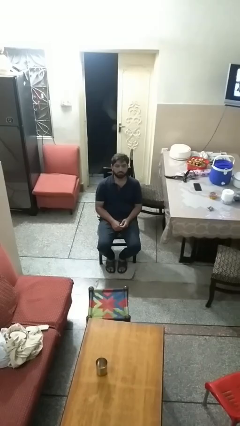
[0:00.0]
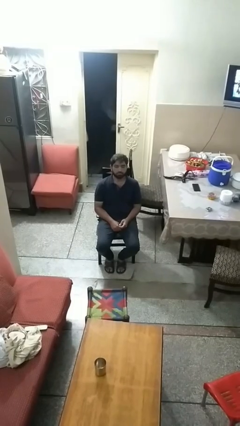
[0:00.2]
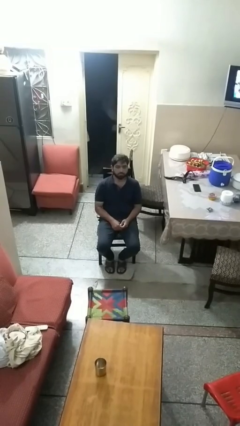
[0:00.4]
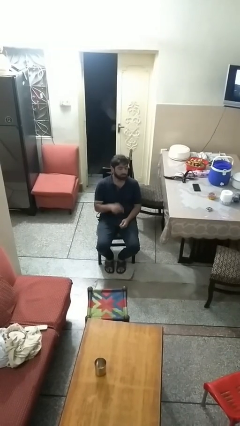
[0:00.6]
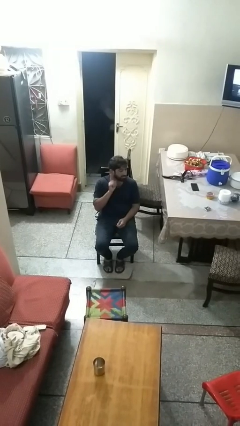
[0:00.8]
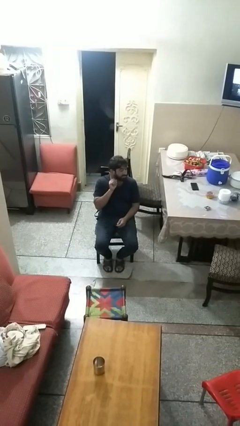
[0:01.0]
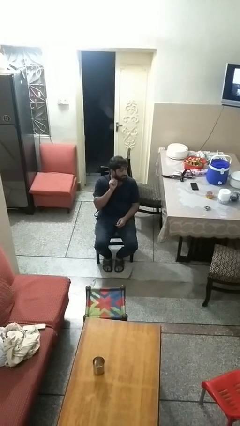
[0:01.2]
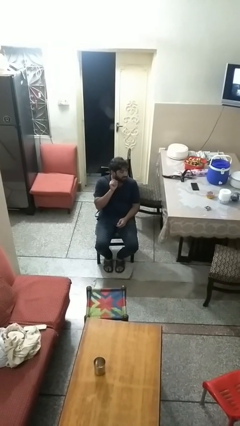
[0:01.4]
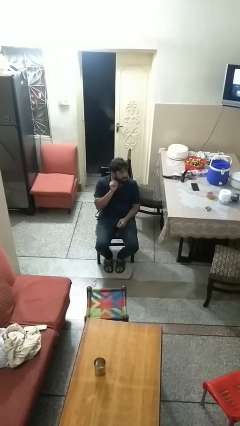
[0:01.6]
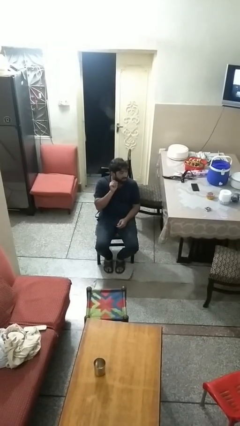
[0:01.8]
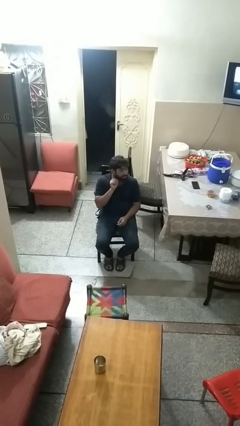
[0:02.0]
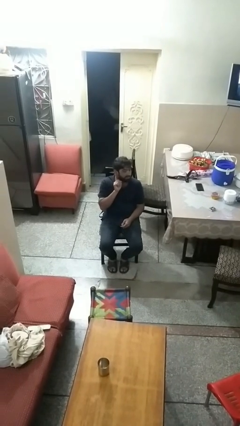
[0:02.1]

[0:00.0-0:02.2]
person gestures listen closely

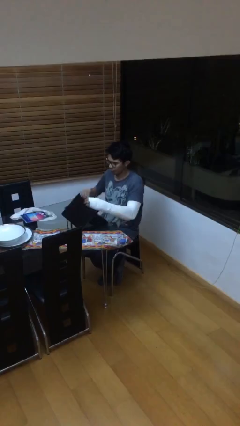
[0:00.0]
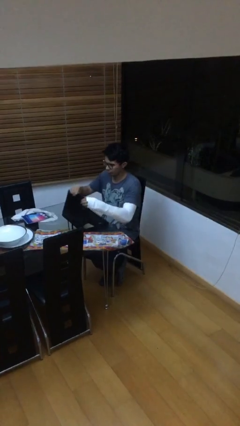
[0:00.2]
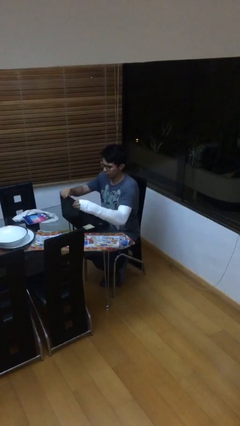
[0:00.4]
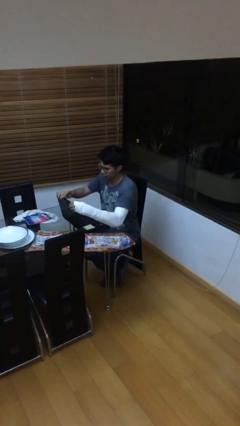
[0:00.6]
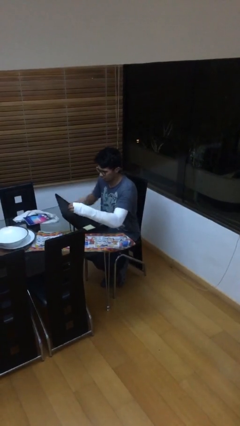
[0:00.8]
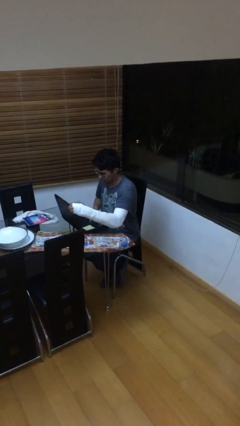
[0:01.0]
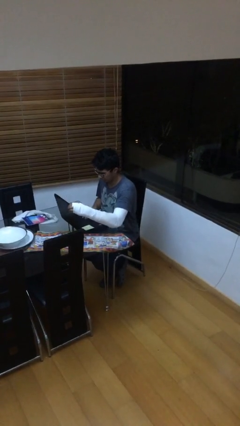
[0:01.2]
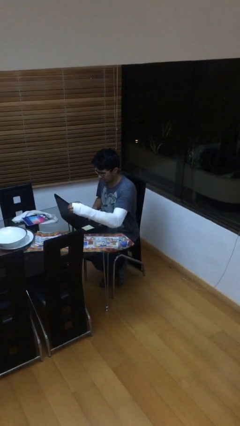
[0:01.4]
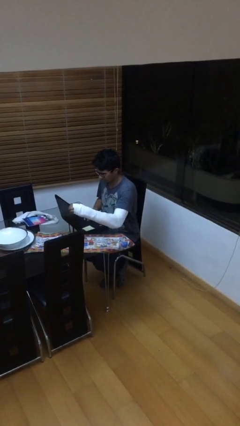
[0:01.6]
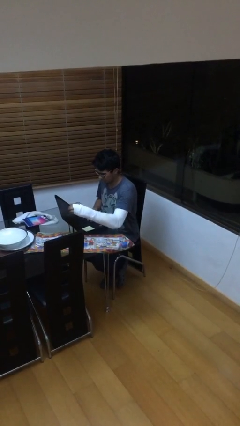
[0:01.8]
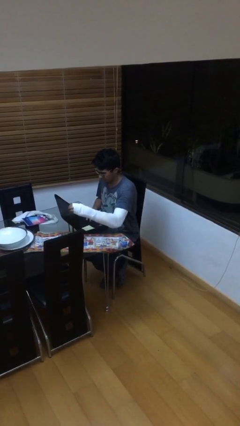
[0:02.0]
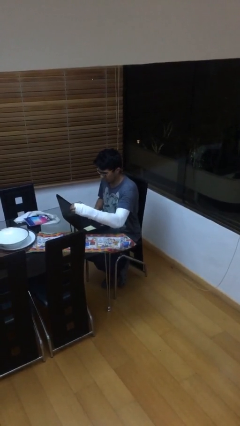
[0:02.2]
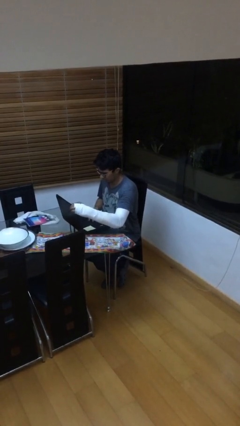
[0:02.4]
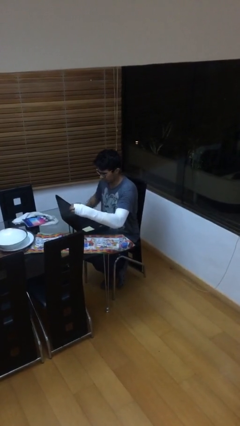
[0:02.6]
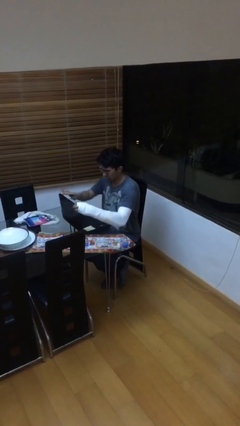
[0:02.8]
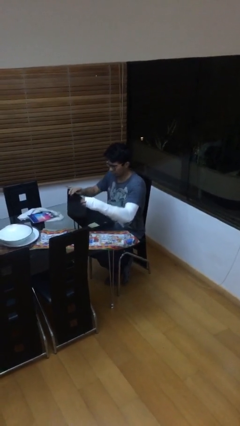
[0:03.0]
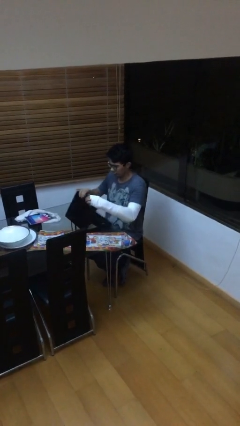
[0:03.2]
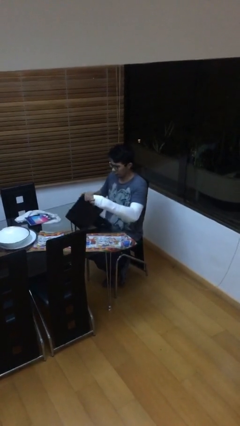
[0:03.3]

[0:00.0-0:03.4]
person interacts with laptop

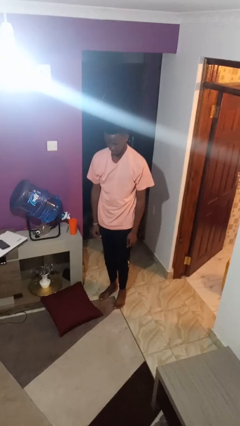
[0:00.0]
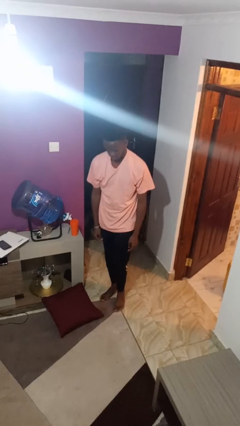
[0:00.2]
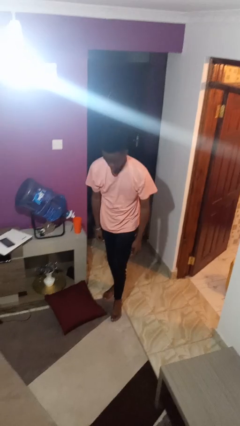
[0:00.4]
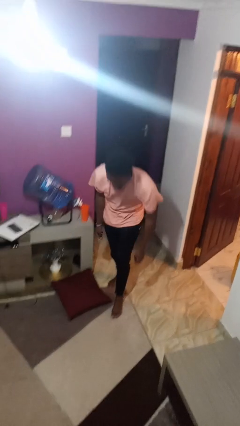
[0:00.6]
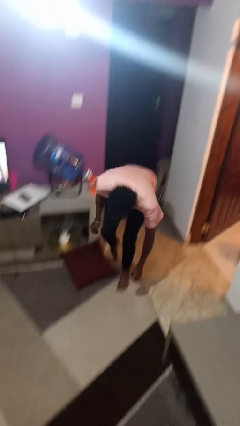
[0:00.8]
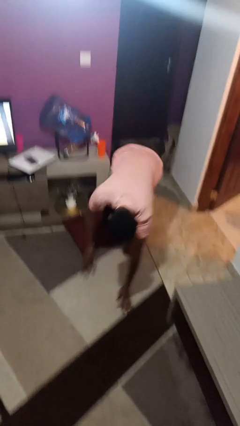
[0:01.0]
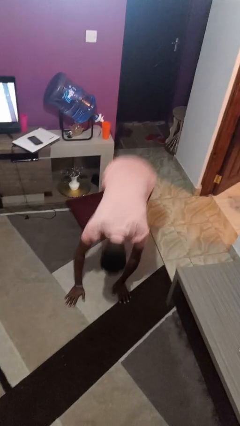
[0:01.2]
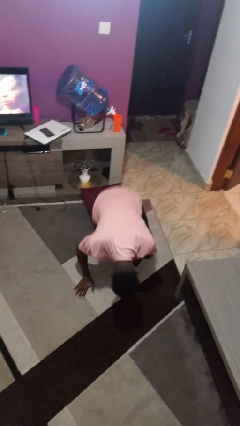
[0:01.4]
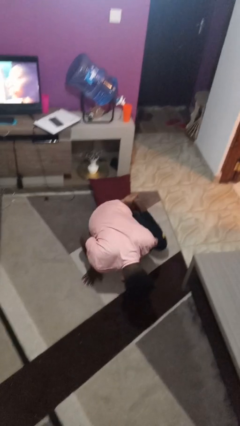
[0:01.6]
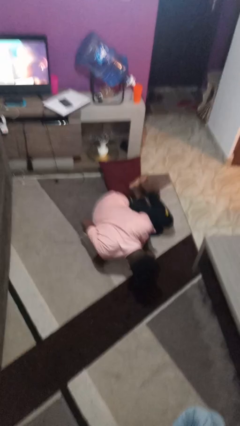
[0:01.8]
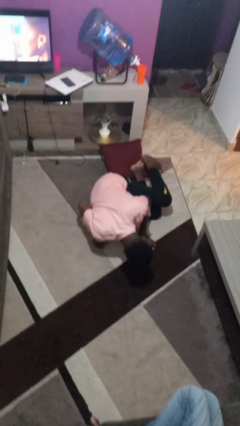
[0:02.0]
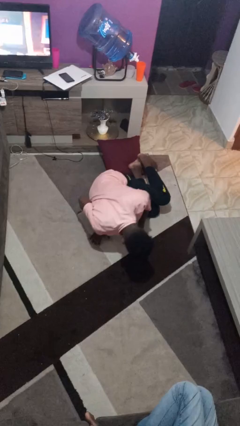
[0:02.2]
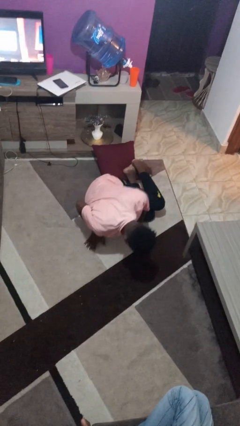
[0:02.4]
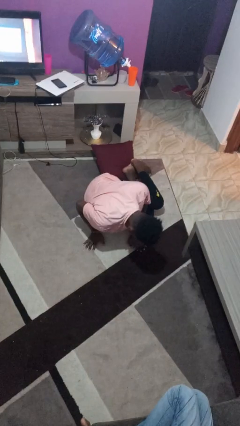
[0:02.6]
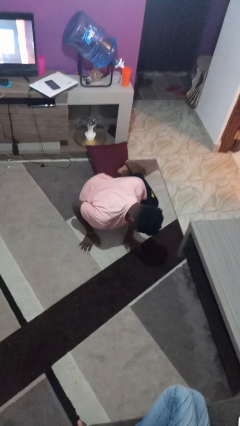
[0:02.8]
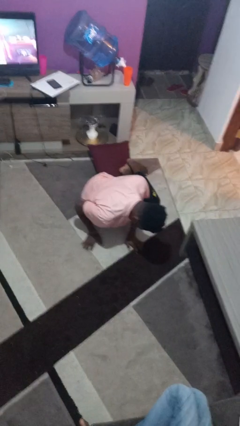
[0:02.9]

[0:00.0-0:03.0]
person trips on object on floor

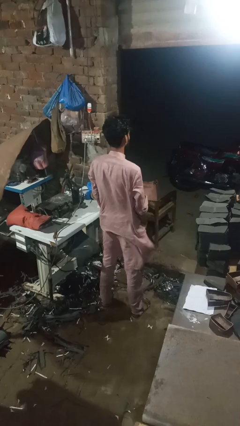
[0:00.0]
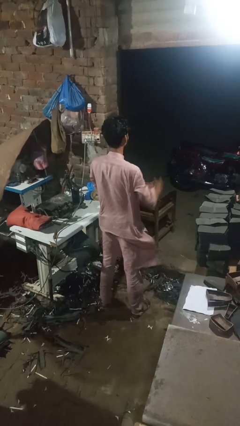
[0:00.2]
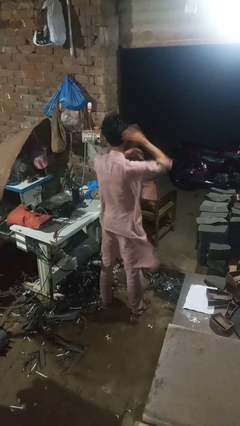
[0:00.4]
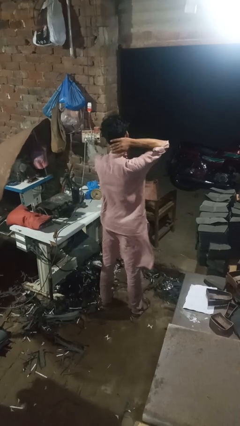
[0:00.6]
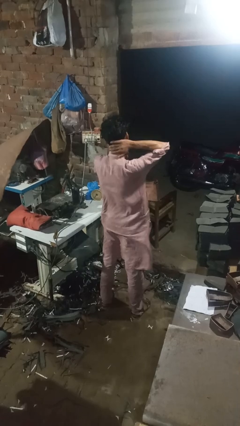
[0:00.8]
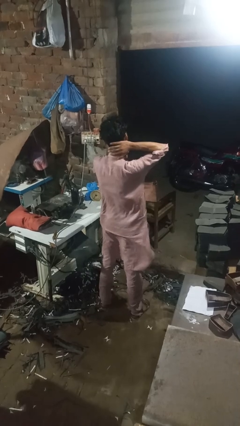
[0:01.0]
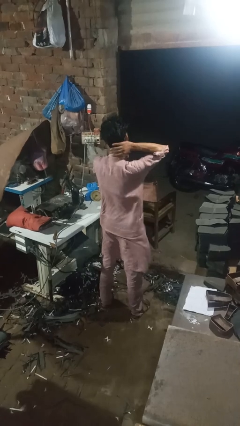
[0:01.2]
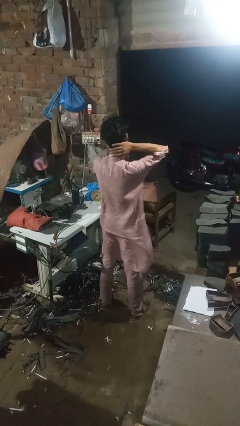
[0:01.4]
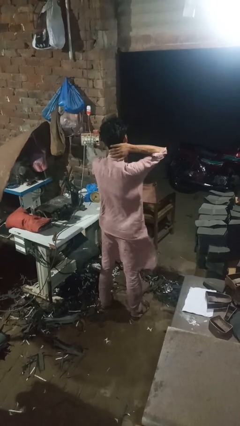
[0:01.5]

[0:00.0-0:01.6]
person rubs neck

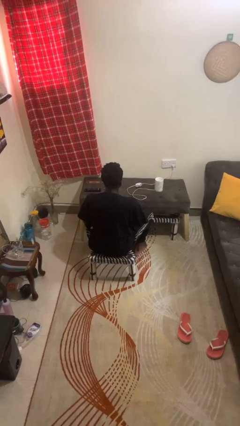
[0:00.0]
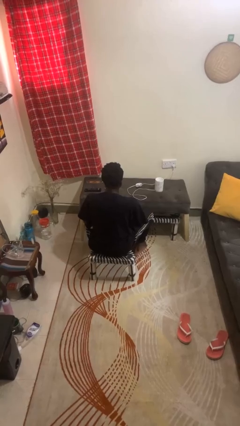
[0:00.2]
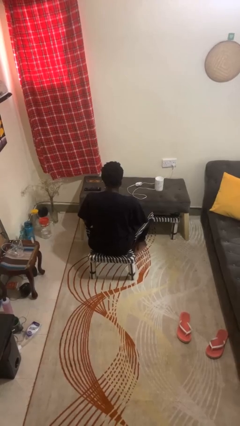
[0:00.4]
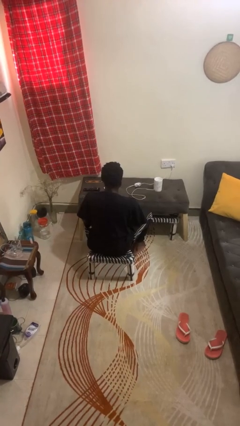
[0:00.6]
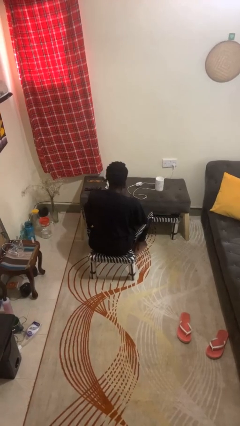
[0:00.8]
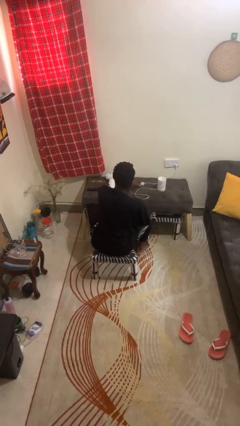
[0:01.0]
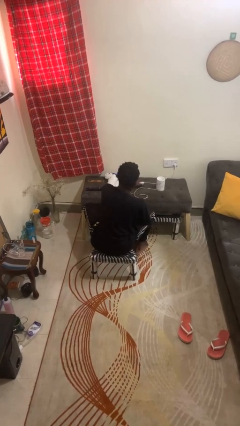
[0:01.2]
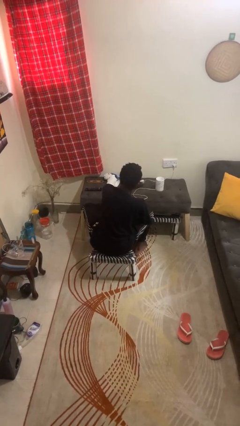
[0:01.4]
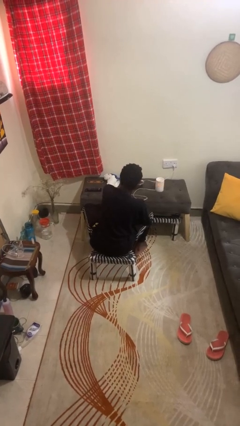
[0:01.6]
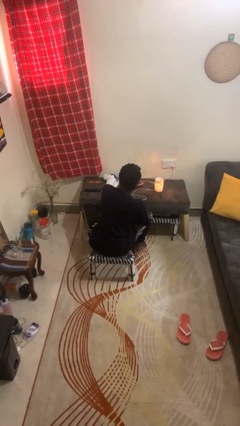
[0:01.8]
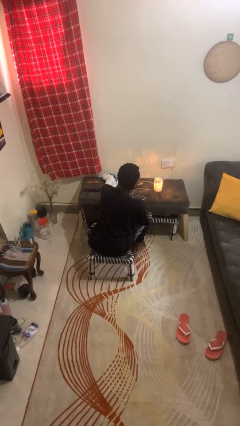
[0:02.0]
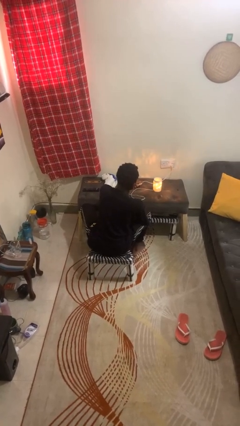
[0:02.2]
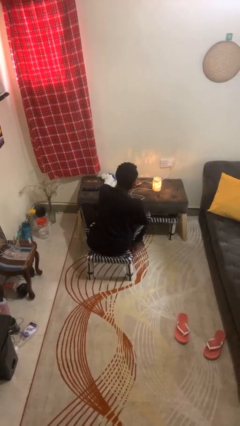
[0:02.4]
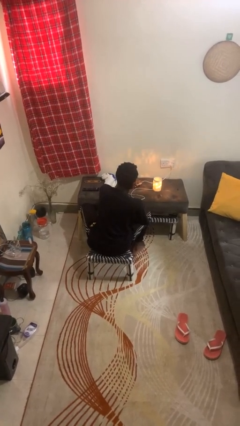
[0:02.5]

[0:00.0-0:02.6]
person turns on lamp

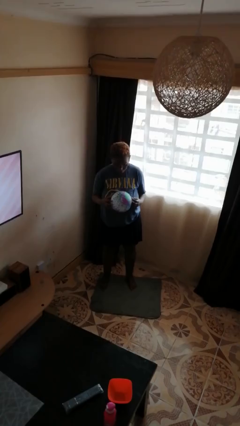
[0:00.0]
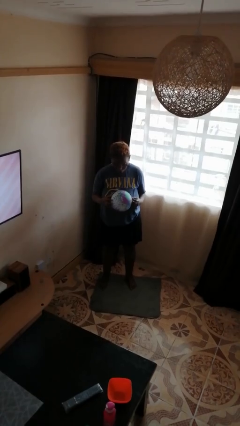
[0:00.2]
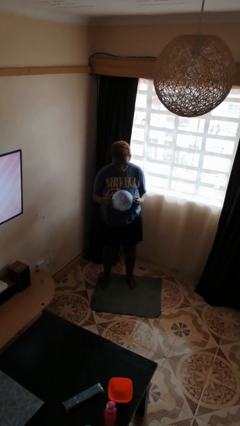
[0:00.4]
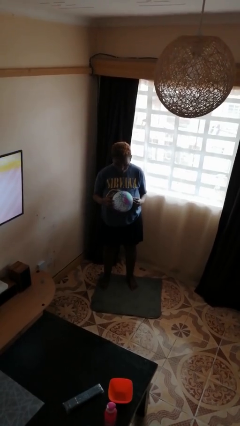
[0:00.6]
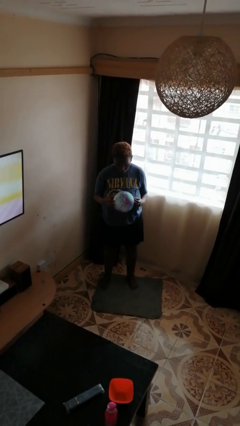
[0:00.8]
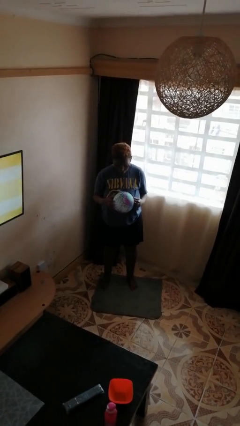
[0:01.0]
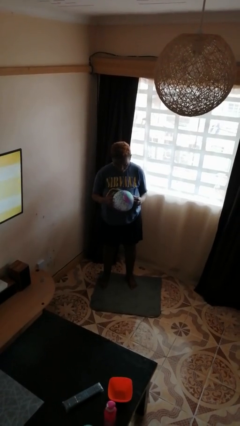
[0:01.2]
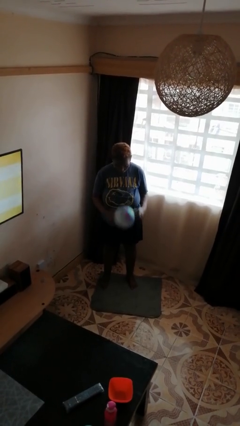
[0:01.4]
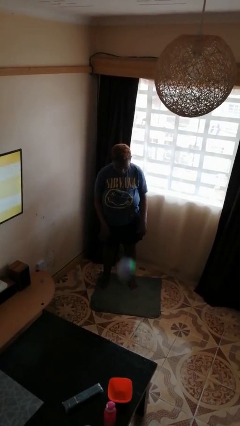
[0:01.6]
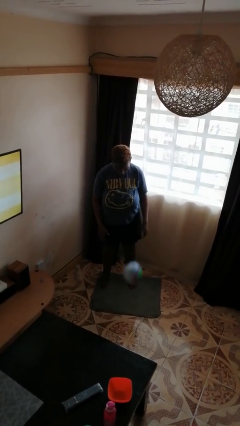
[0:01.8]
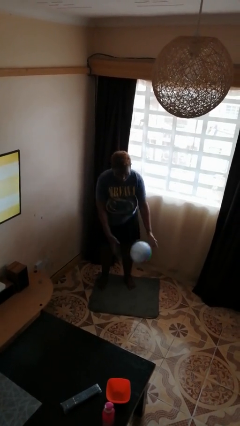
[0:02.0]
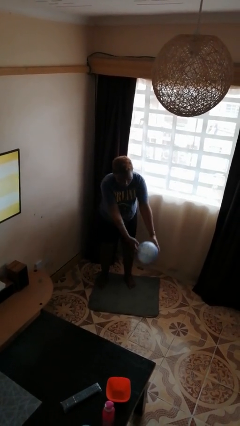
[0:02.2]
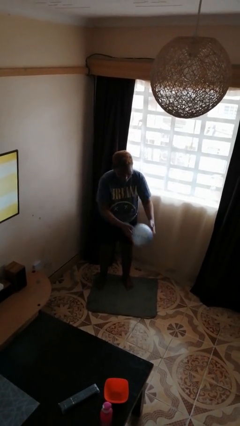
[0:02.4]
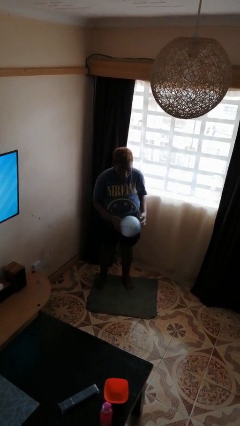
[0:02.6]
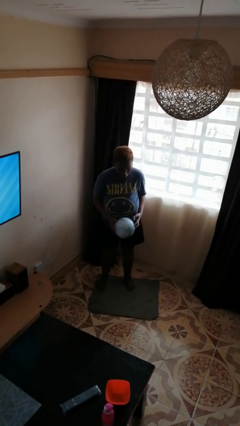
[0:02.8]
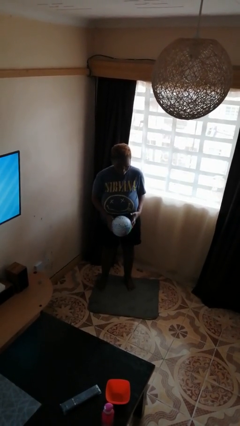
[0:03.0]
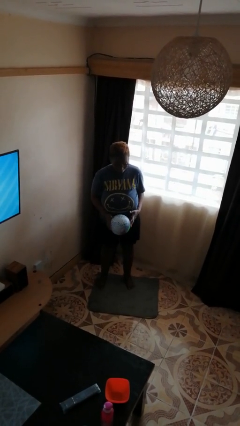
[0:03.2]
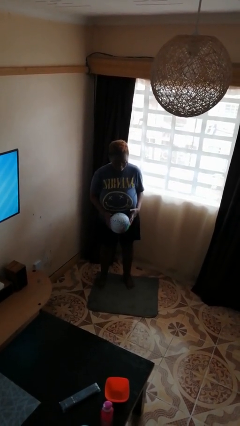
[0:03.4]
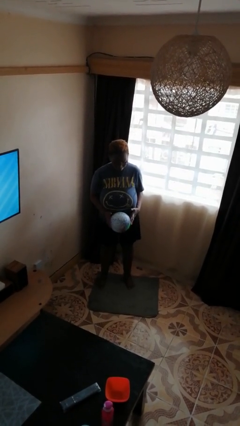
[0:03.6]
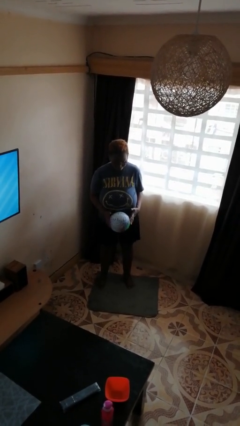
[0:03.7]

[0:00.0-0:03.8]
person bounces ball on floor

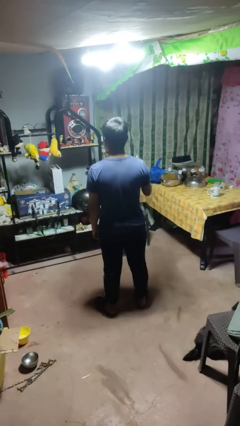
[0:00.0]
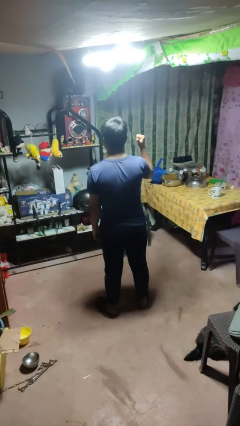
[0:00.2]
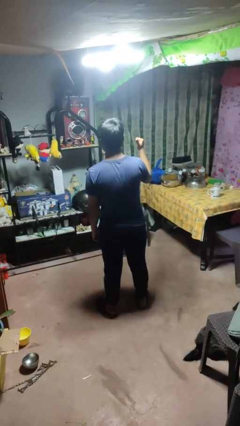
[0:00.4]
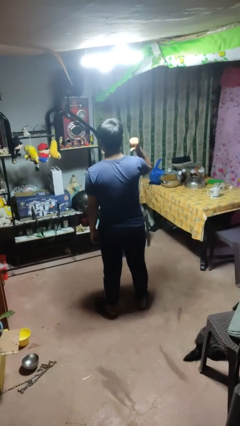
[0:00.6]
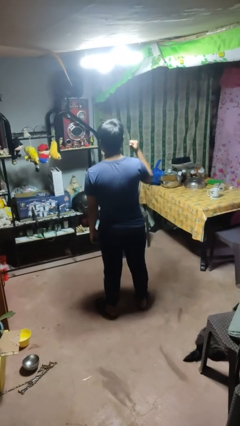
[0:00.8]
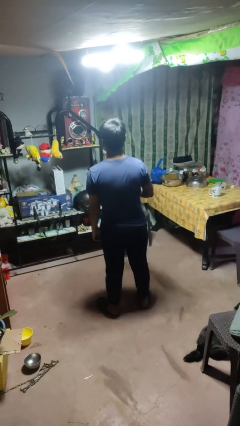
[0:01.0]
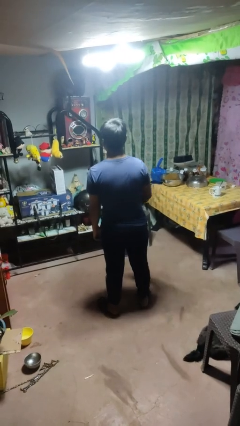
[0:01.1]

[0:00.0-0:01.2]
person gestures behind me
